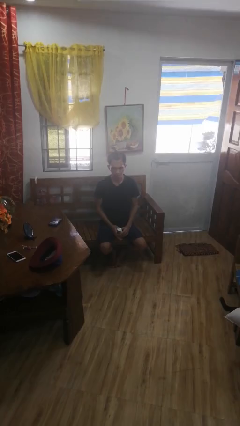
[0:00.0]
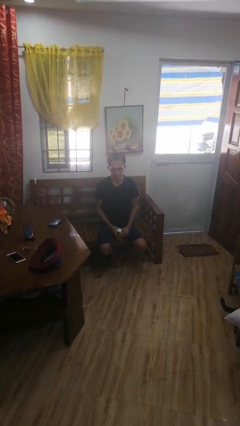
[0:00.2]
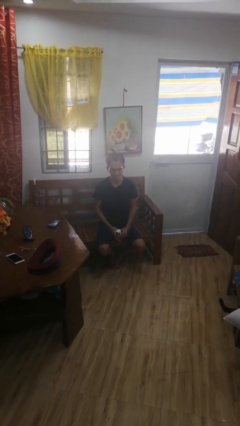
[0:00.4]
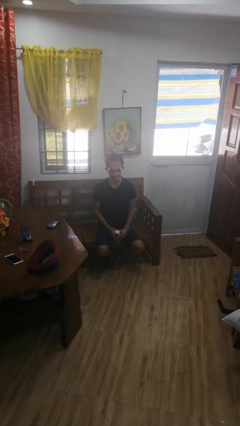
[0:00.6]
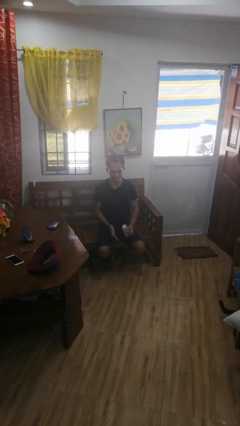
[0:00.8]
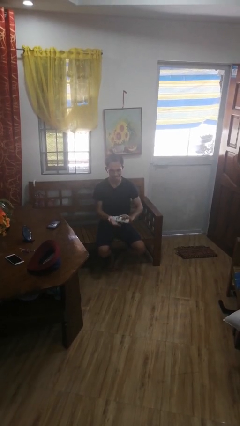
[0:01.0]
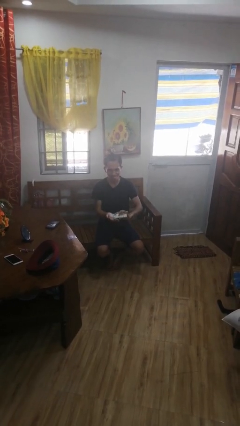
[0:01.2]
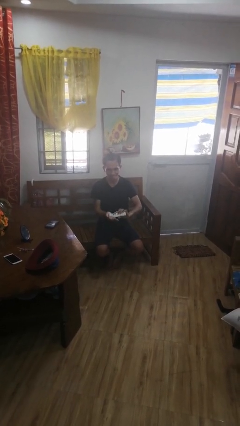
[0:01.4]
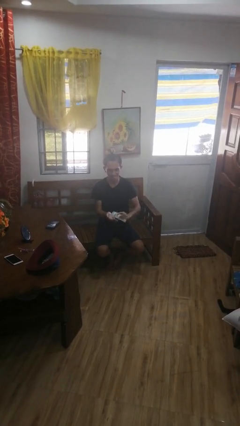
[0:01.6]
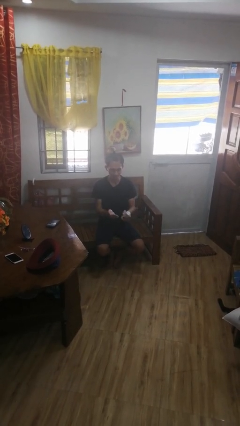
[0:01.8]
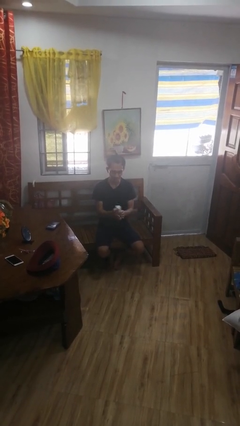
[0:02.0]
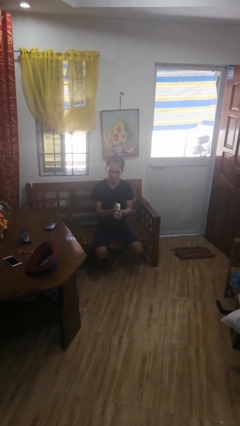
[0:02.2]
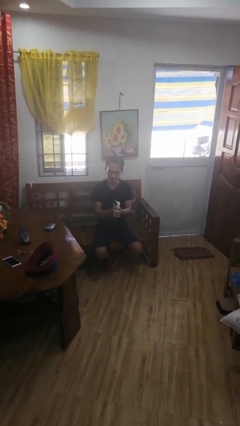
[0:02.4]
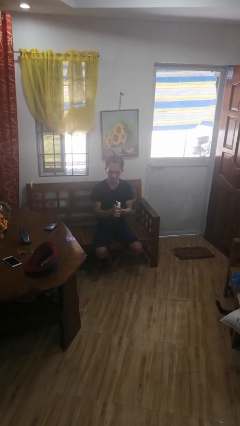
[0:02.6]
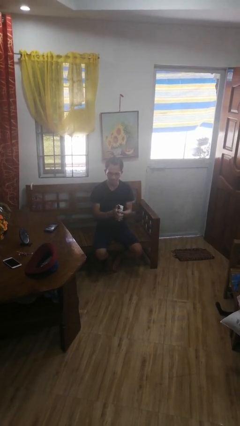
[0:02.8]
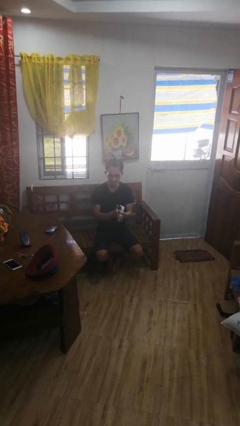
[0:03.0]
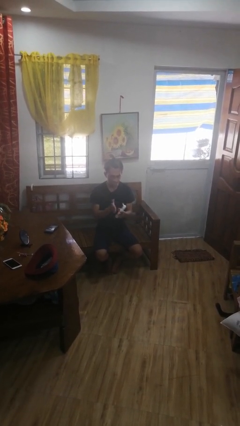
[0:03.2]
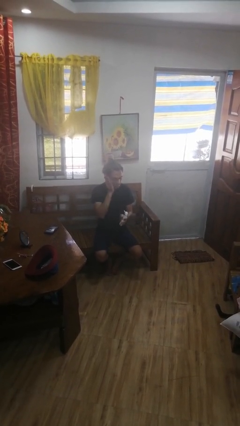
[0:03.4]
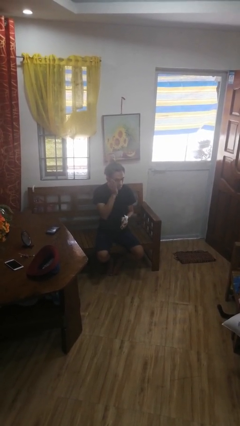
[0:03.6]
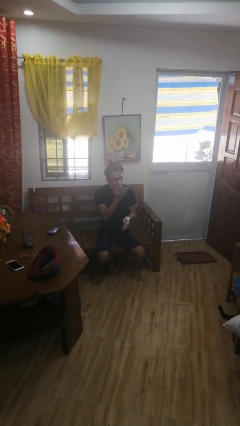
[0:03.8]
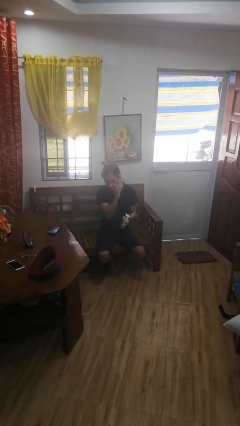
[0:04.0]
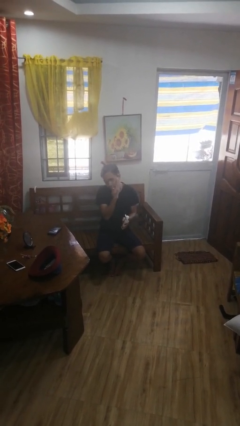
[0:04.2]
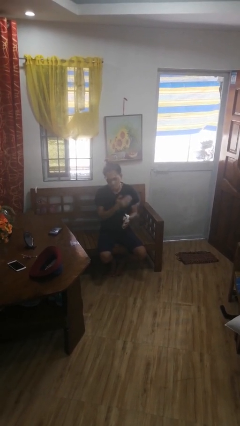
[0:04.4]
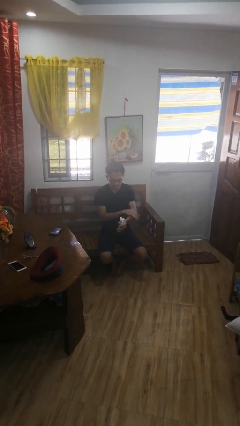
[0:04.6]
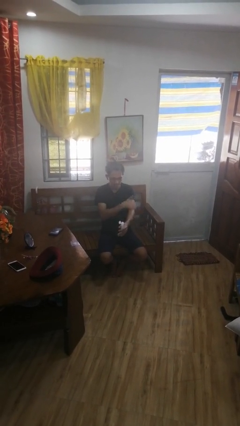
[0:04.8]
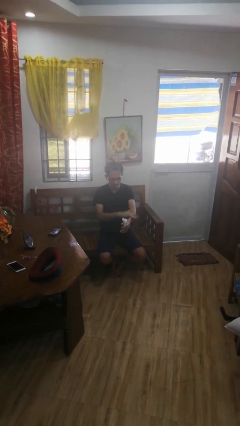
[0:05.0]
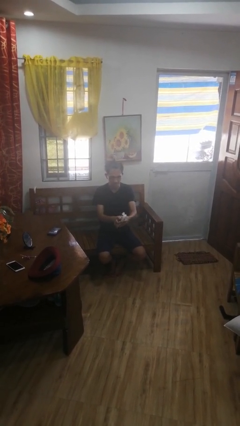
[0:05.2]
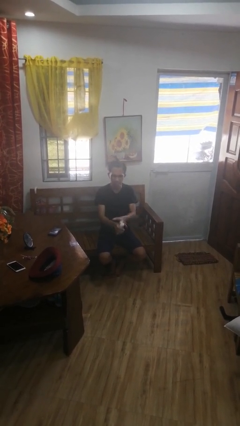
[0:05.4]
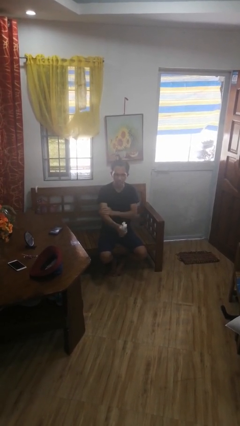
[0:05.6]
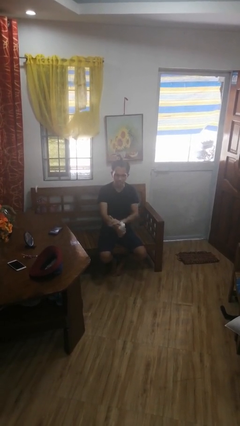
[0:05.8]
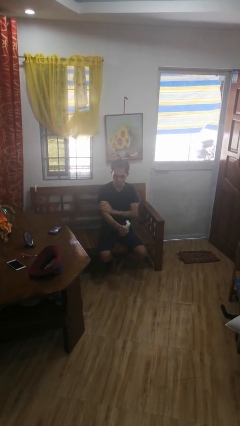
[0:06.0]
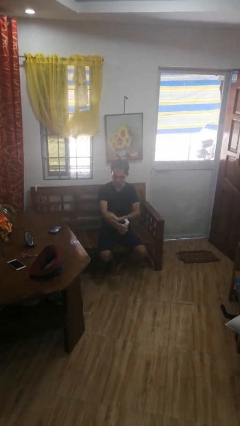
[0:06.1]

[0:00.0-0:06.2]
person applies sunscreen

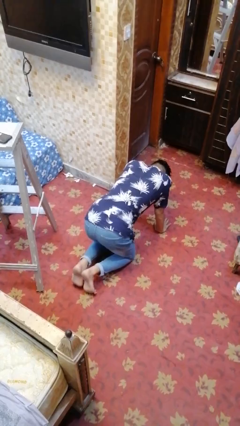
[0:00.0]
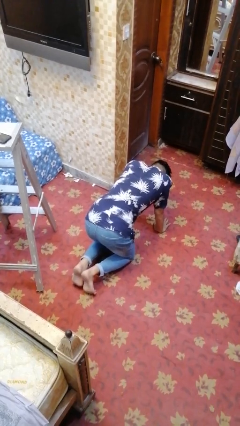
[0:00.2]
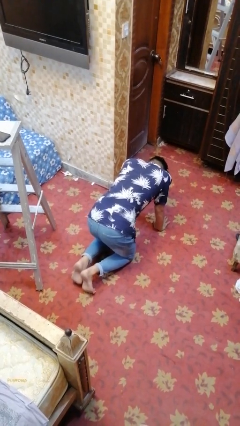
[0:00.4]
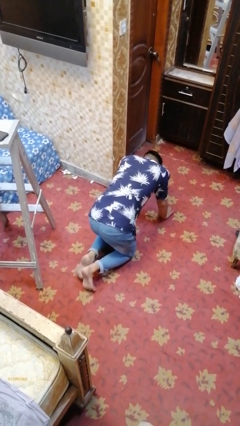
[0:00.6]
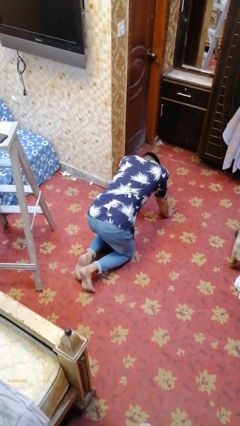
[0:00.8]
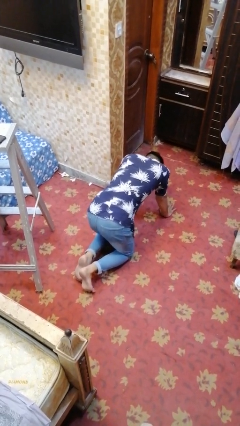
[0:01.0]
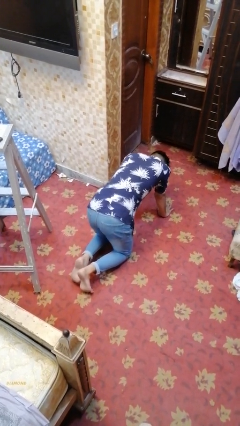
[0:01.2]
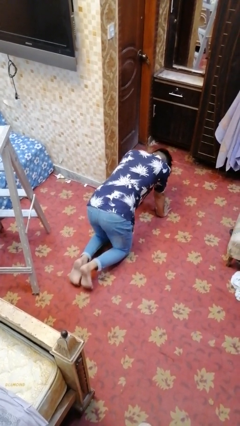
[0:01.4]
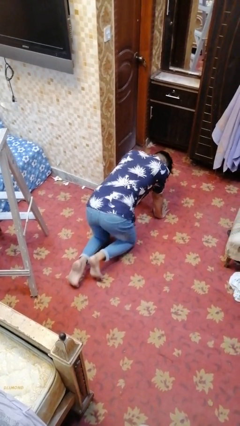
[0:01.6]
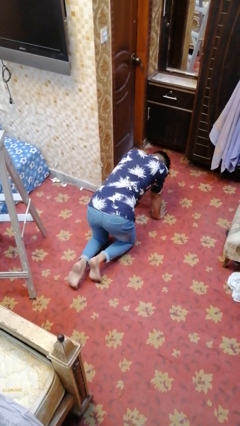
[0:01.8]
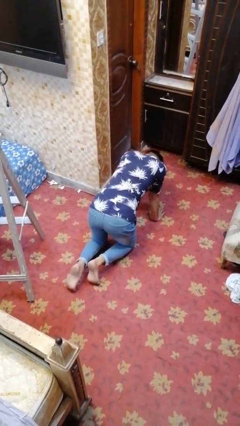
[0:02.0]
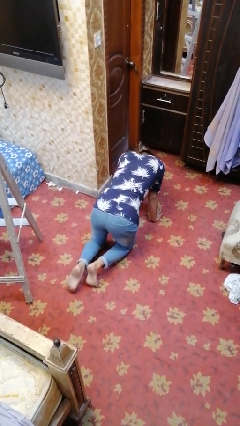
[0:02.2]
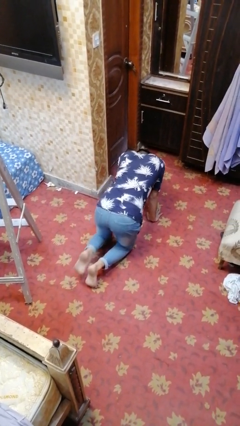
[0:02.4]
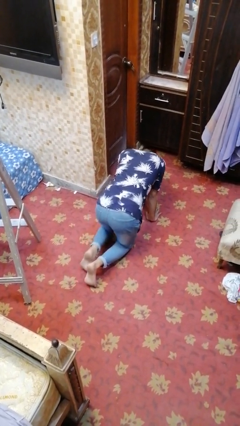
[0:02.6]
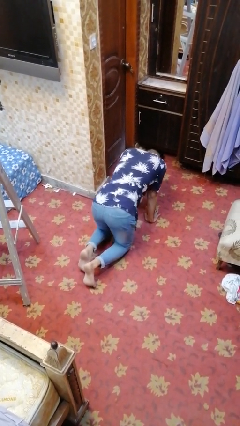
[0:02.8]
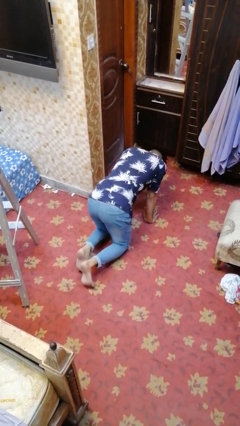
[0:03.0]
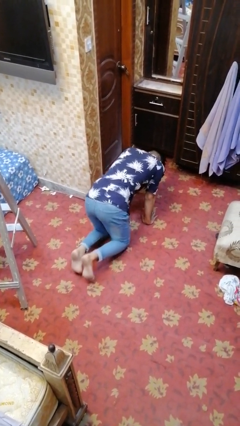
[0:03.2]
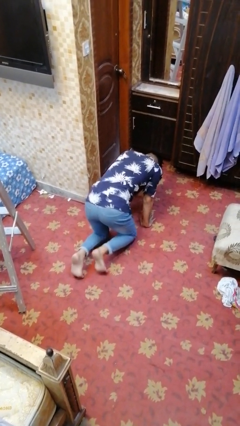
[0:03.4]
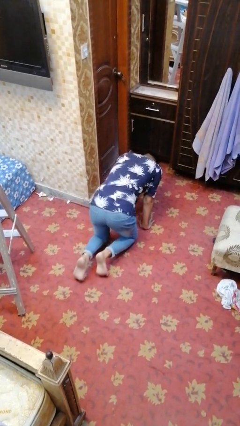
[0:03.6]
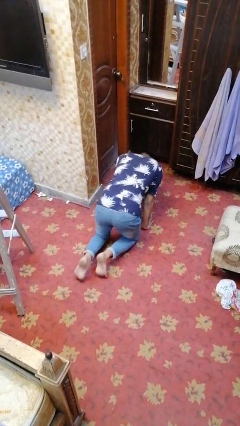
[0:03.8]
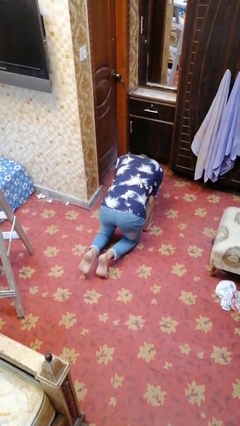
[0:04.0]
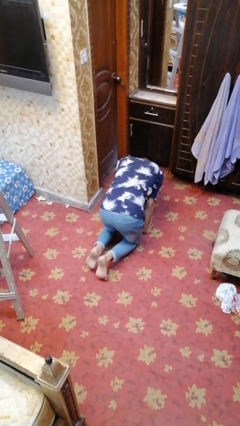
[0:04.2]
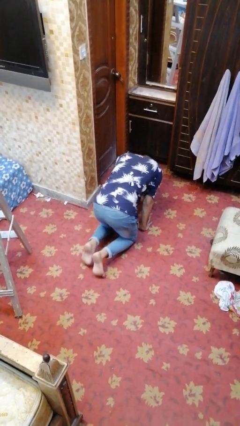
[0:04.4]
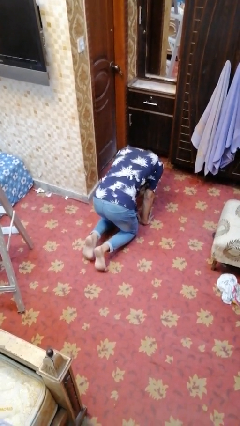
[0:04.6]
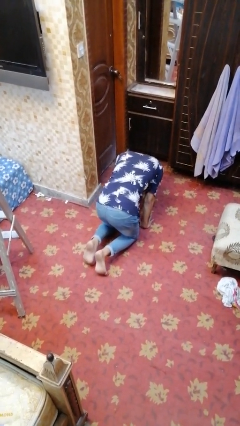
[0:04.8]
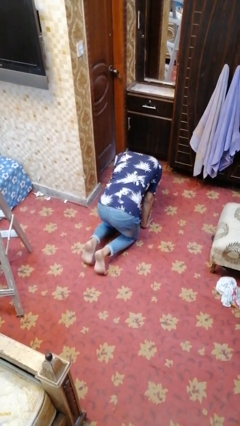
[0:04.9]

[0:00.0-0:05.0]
person crawls

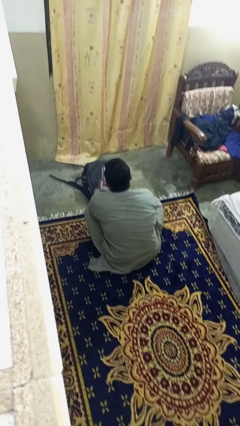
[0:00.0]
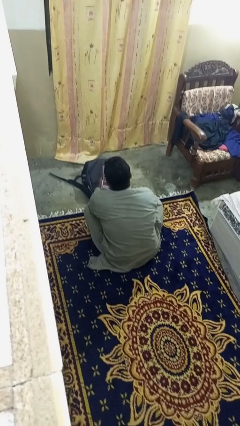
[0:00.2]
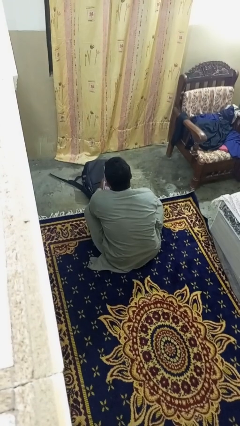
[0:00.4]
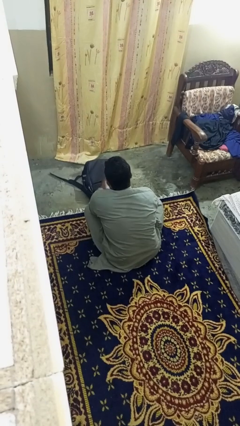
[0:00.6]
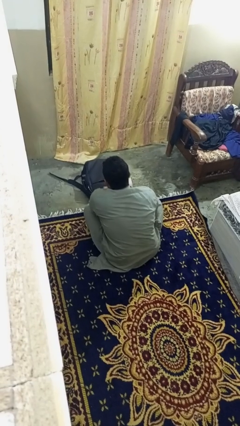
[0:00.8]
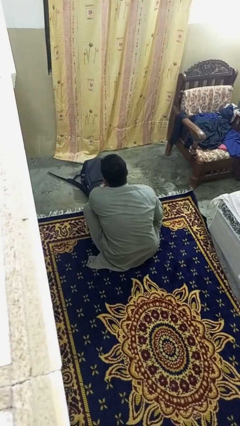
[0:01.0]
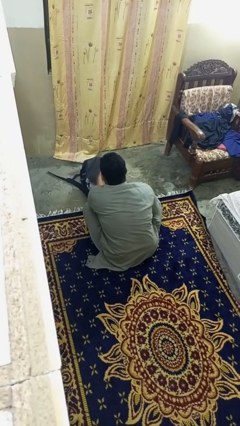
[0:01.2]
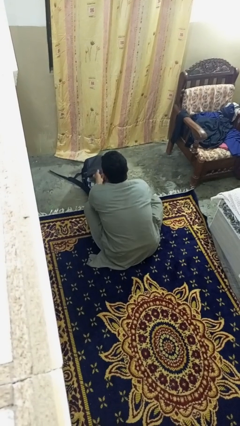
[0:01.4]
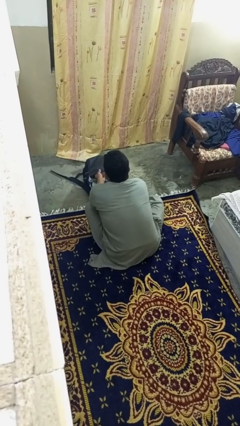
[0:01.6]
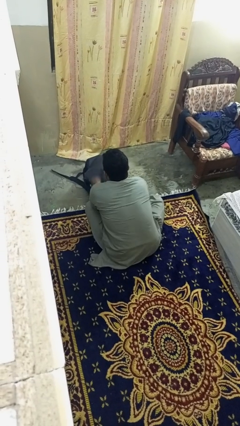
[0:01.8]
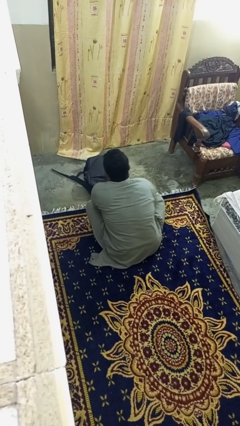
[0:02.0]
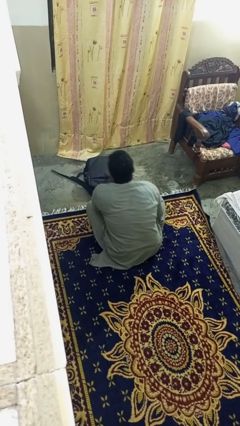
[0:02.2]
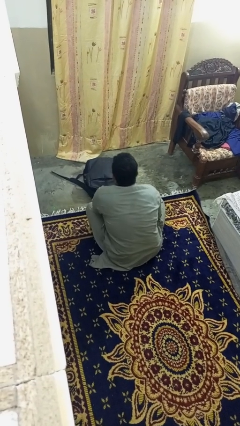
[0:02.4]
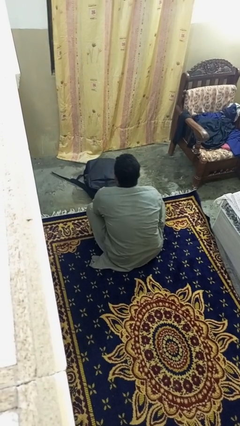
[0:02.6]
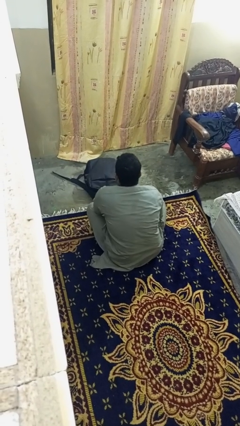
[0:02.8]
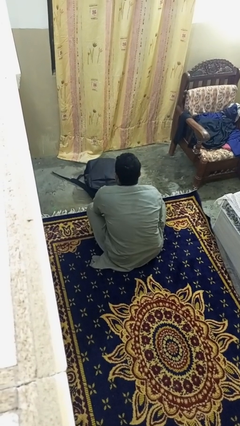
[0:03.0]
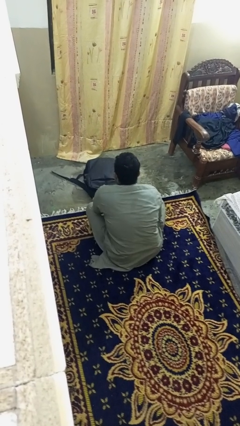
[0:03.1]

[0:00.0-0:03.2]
person puts object into bag

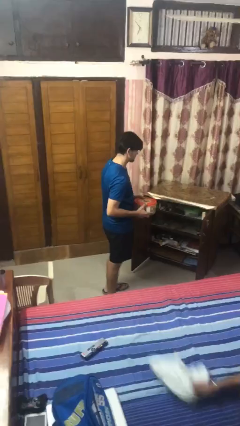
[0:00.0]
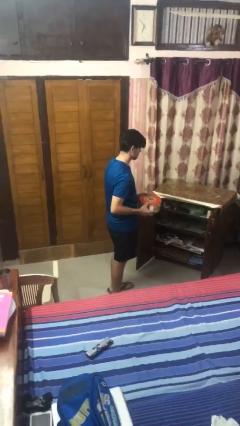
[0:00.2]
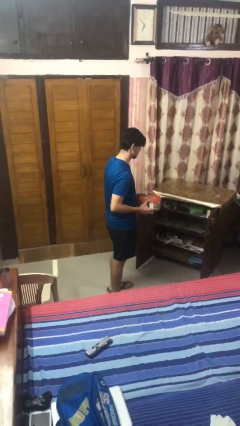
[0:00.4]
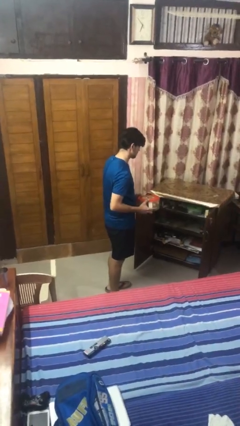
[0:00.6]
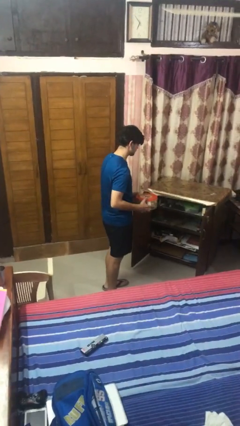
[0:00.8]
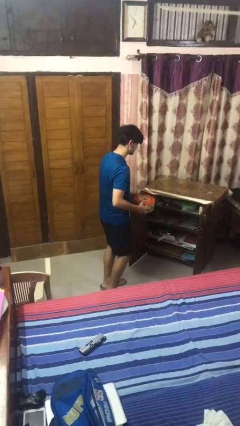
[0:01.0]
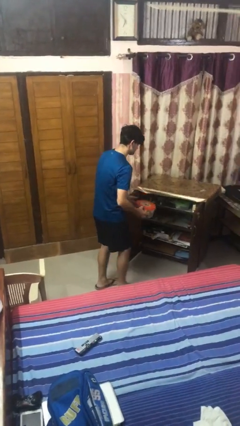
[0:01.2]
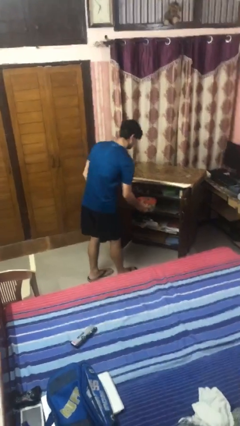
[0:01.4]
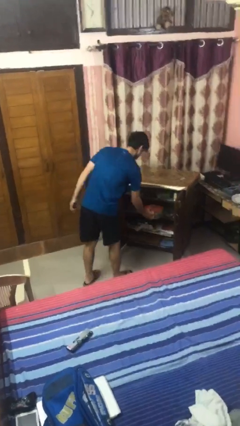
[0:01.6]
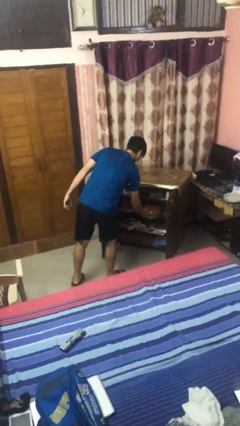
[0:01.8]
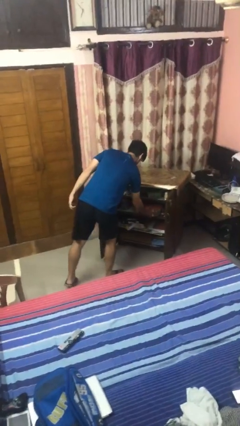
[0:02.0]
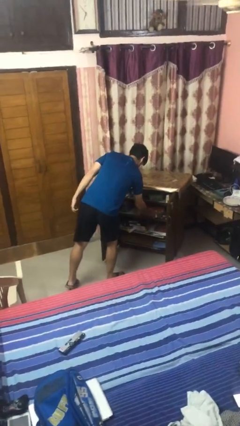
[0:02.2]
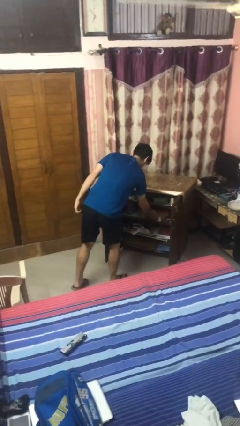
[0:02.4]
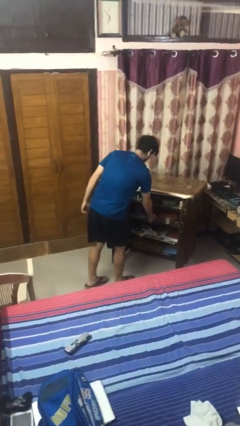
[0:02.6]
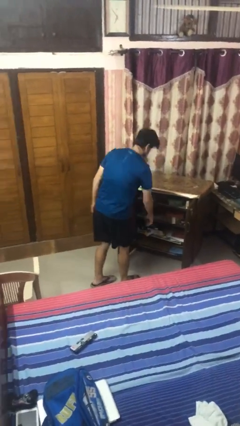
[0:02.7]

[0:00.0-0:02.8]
person puts down object into cabinet

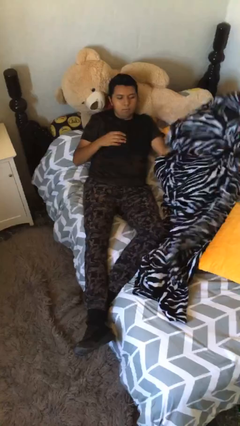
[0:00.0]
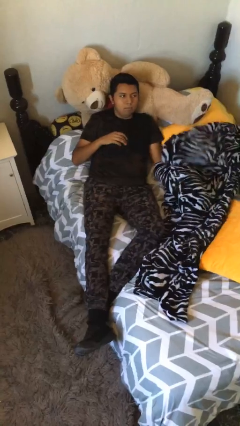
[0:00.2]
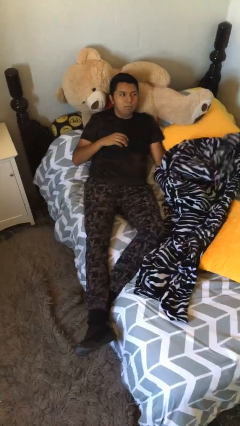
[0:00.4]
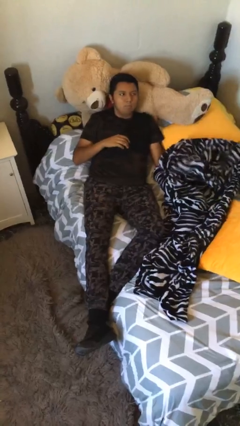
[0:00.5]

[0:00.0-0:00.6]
person uncovers with bedsheets
